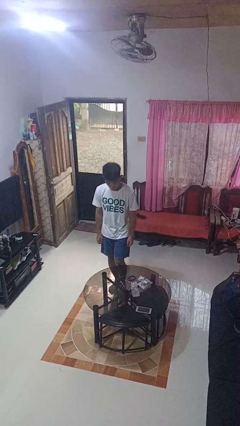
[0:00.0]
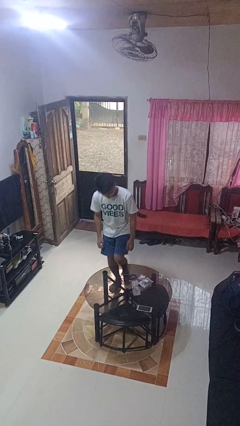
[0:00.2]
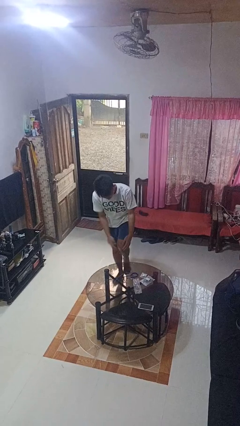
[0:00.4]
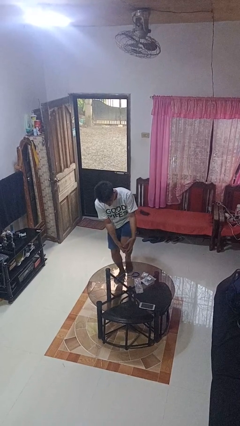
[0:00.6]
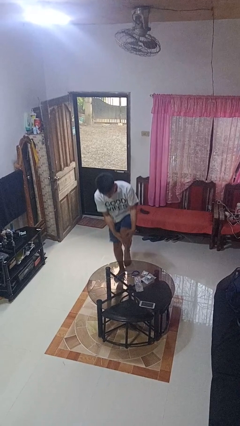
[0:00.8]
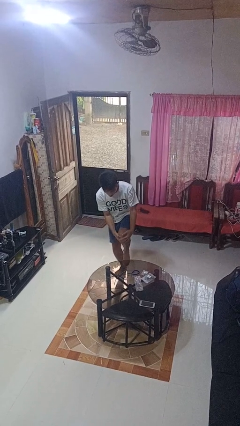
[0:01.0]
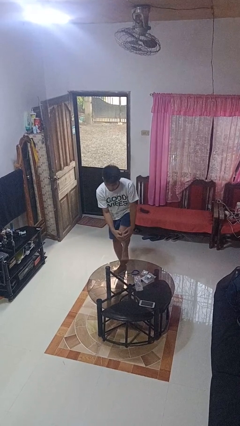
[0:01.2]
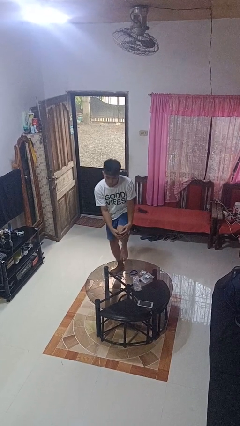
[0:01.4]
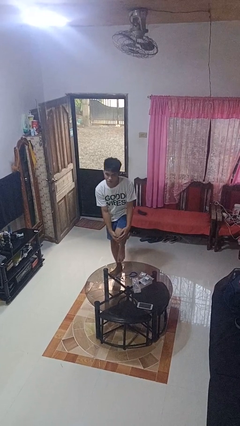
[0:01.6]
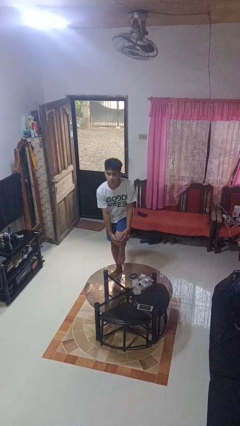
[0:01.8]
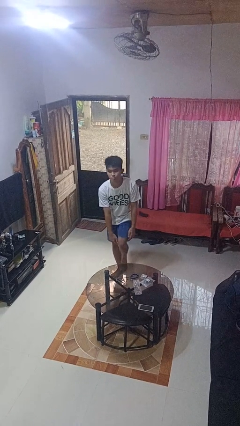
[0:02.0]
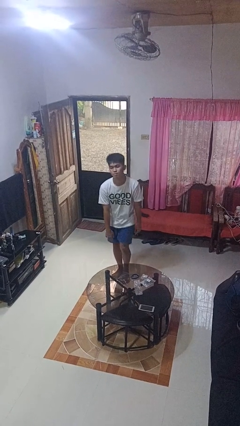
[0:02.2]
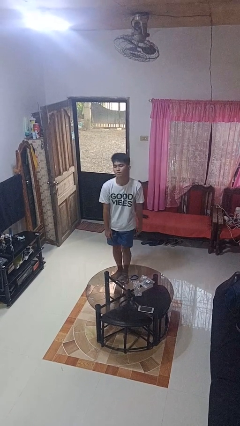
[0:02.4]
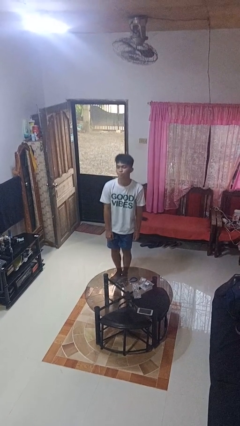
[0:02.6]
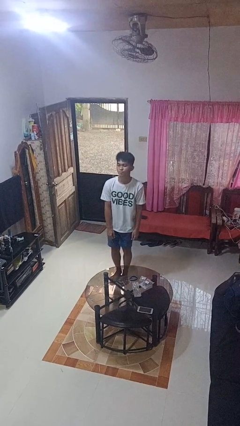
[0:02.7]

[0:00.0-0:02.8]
person bumps into table

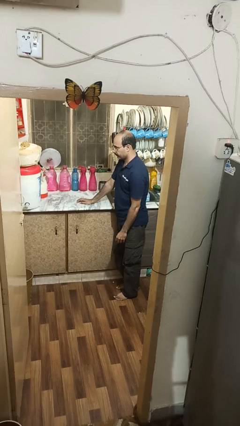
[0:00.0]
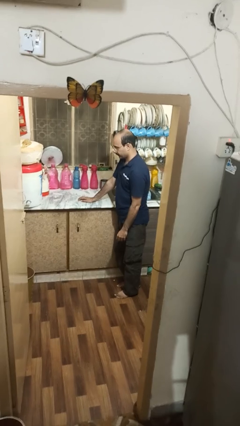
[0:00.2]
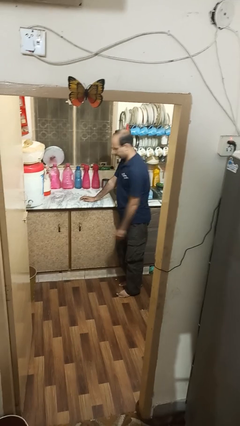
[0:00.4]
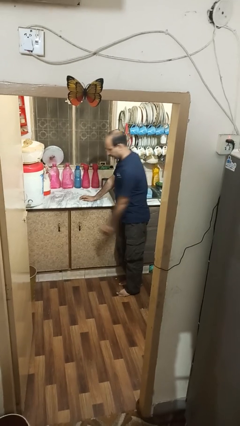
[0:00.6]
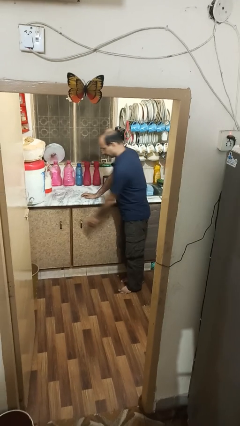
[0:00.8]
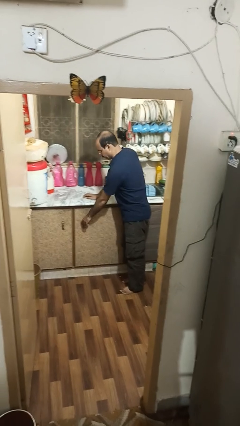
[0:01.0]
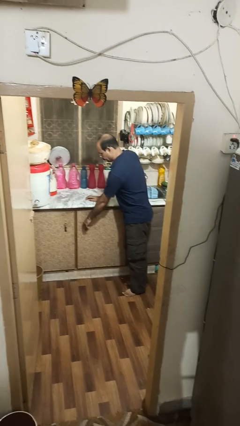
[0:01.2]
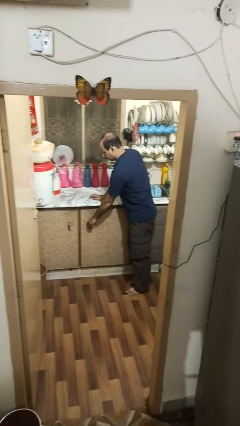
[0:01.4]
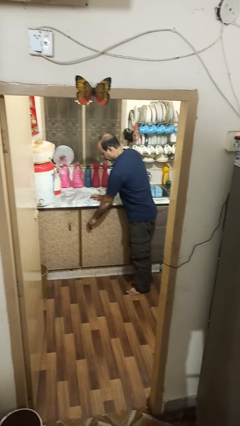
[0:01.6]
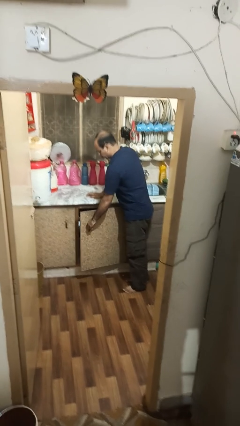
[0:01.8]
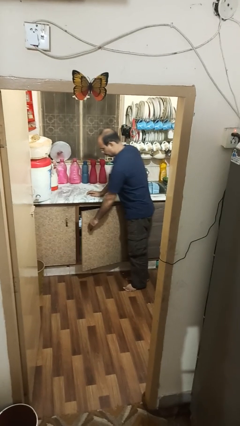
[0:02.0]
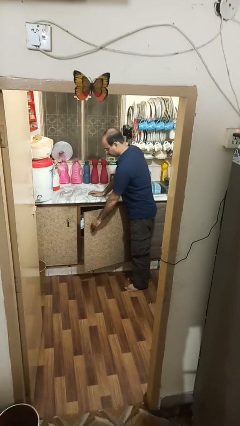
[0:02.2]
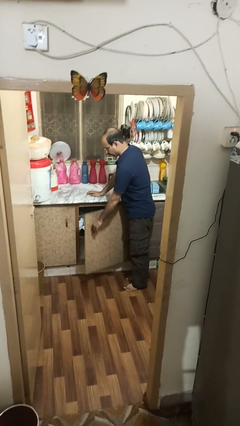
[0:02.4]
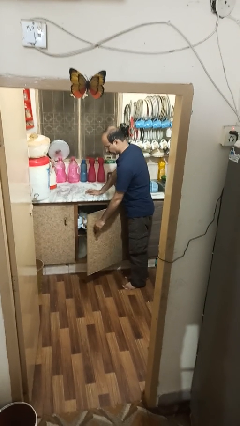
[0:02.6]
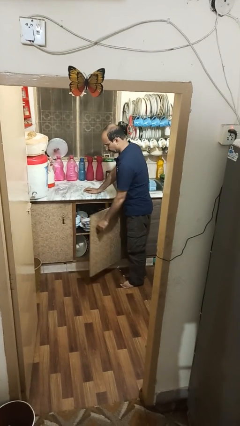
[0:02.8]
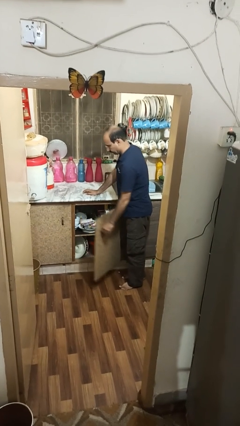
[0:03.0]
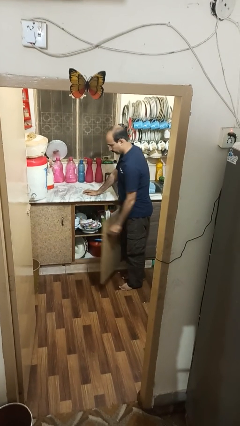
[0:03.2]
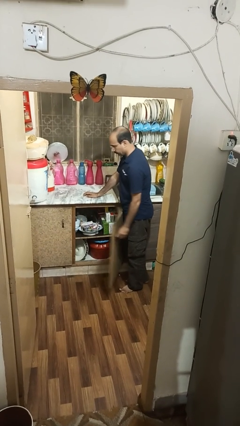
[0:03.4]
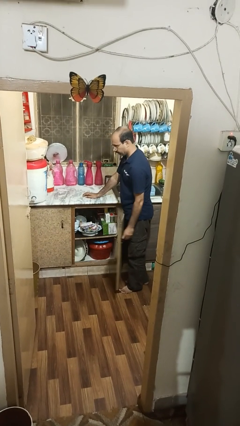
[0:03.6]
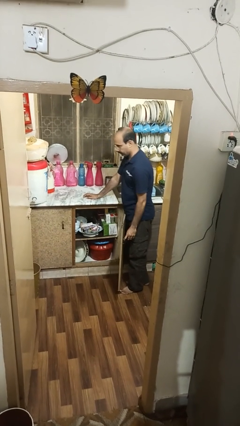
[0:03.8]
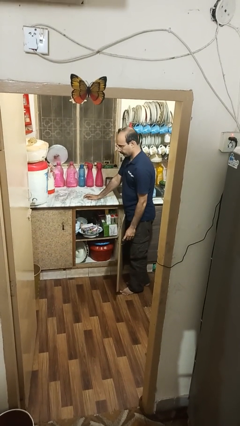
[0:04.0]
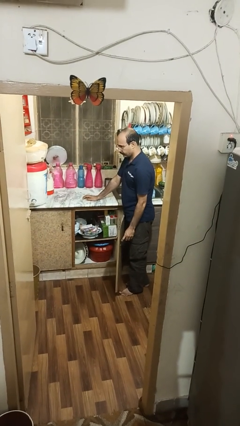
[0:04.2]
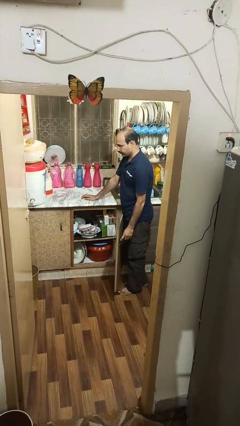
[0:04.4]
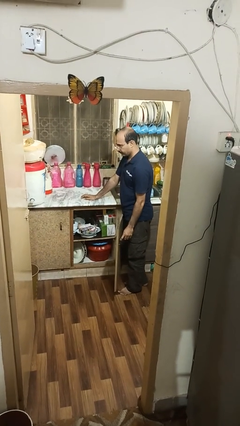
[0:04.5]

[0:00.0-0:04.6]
person opens cabinet

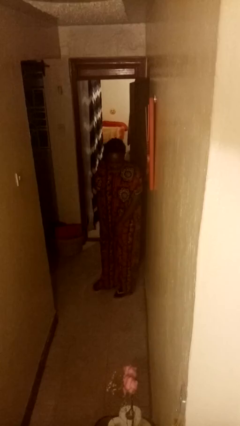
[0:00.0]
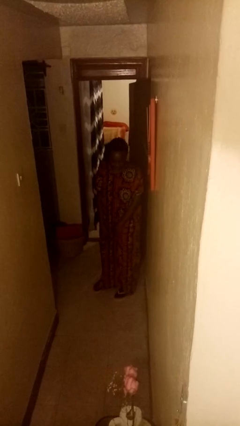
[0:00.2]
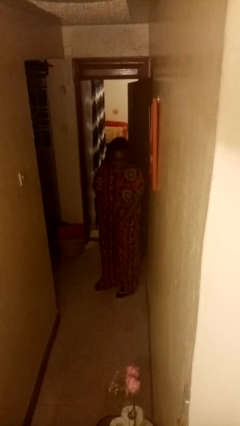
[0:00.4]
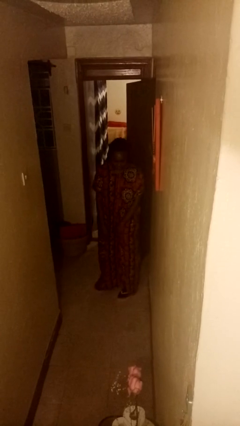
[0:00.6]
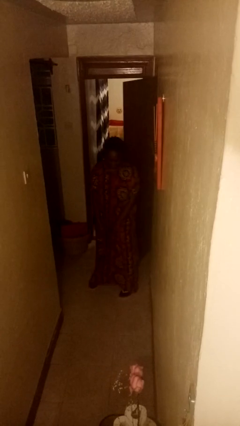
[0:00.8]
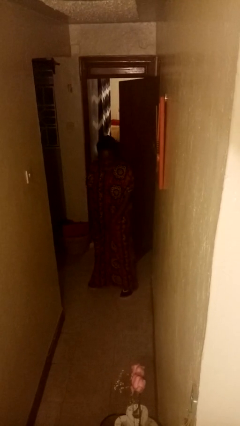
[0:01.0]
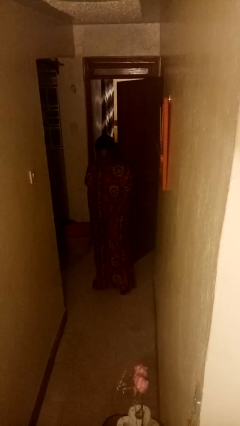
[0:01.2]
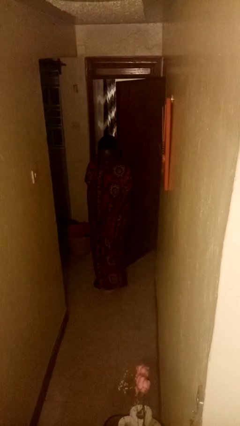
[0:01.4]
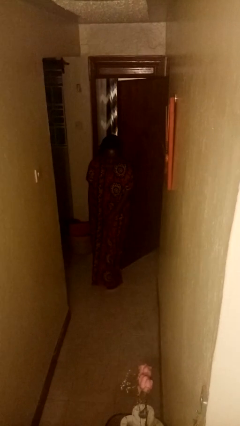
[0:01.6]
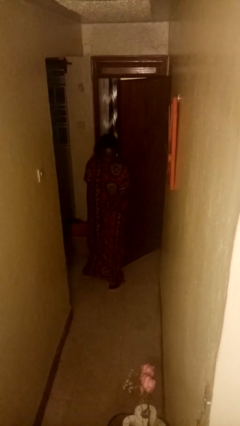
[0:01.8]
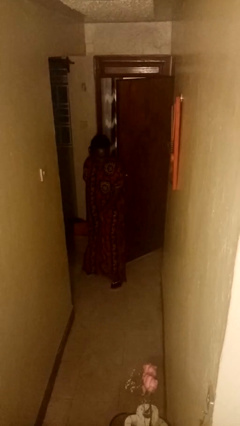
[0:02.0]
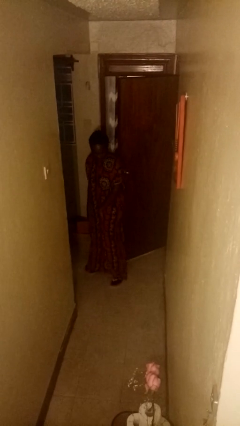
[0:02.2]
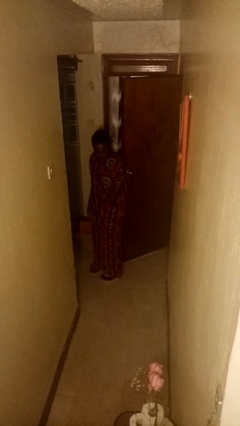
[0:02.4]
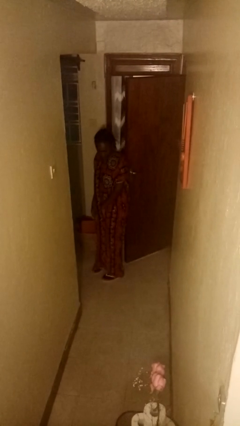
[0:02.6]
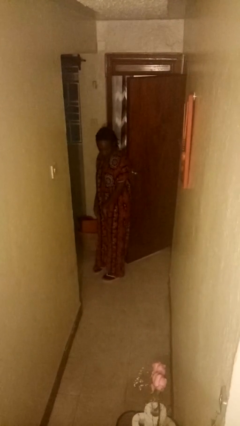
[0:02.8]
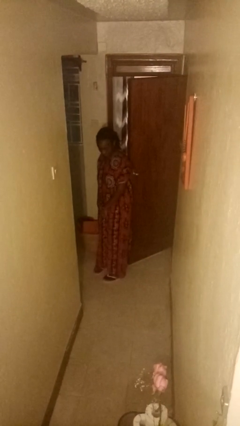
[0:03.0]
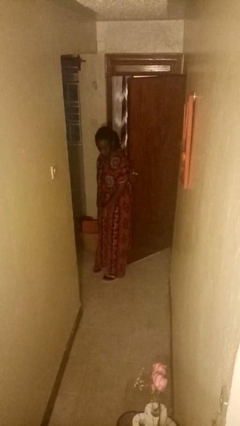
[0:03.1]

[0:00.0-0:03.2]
person opens facility door

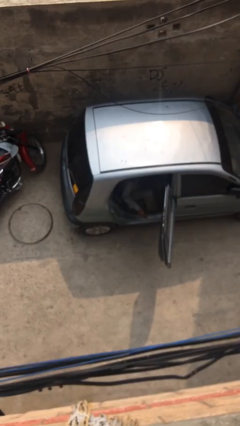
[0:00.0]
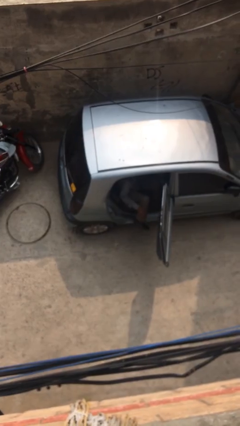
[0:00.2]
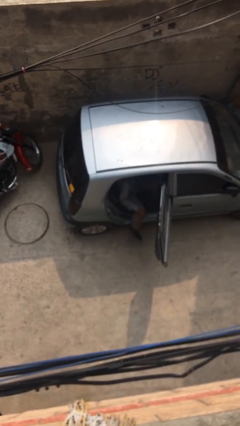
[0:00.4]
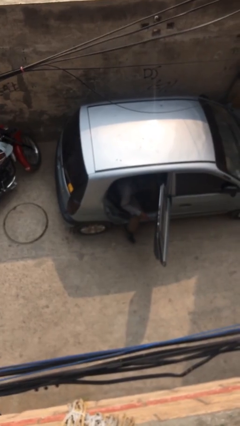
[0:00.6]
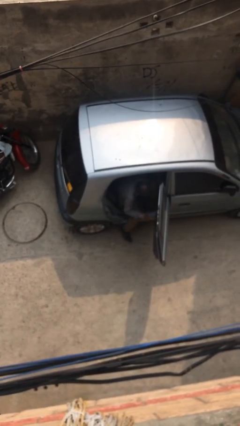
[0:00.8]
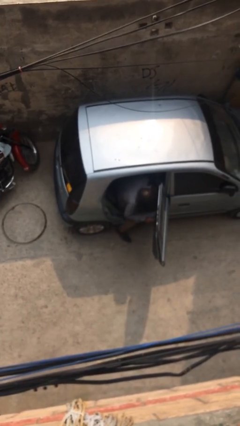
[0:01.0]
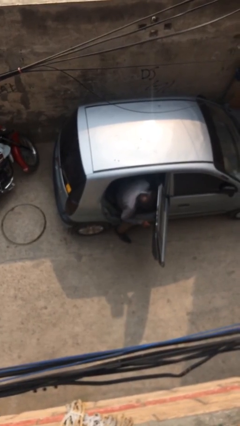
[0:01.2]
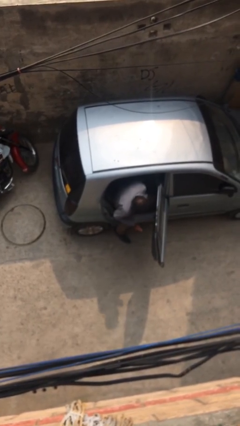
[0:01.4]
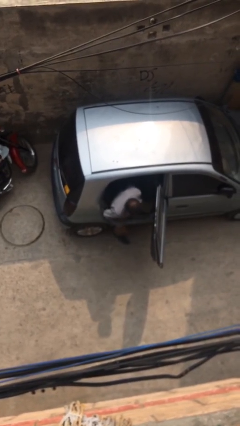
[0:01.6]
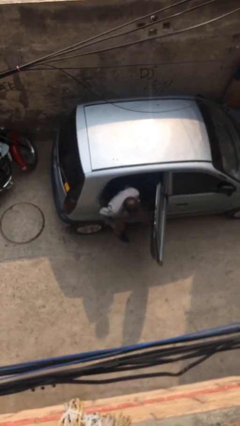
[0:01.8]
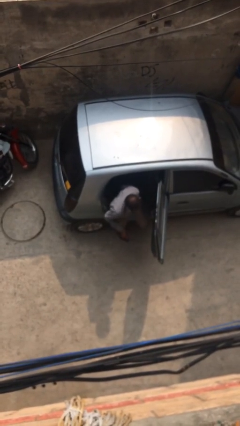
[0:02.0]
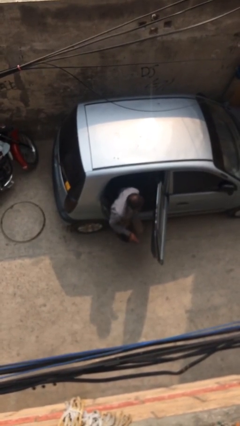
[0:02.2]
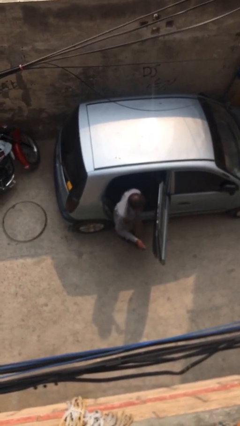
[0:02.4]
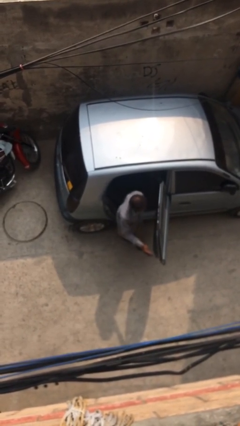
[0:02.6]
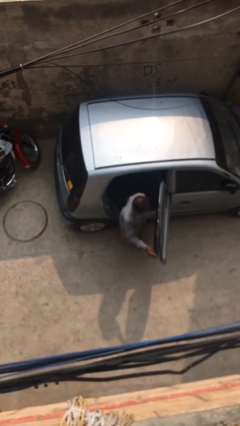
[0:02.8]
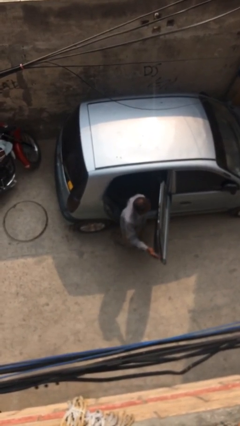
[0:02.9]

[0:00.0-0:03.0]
person exits car

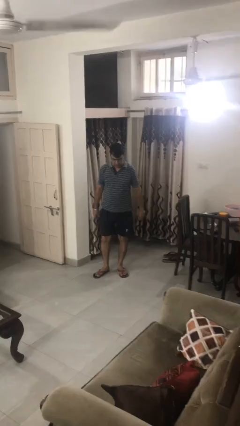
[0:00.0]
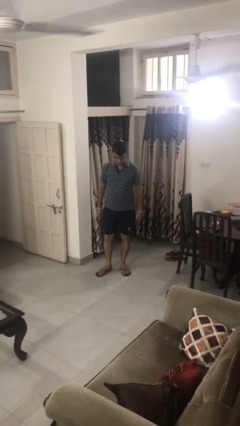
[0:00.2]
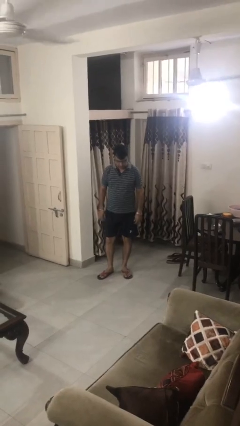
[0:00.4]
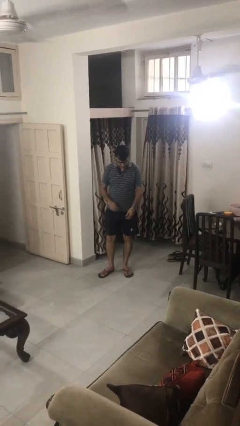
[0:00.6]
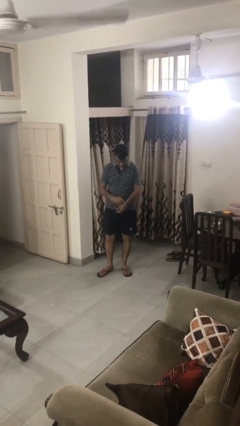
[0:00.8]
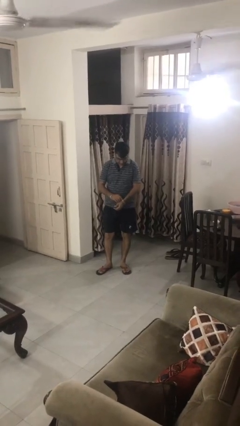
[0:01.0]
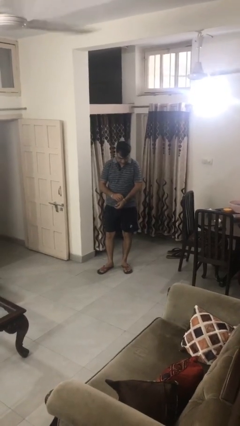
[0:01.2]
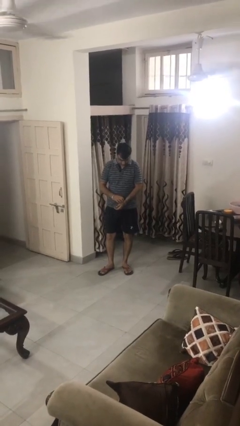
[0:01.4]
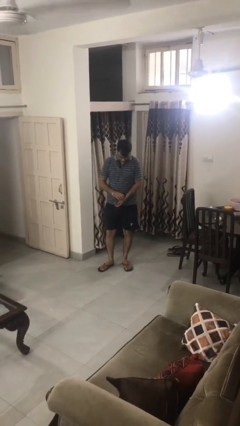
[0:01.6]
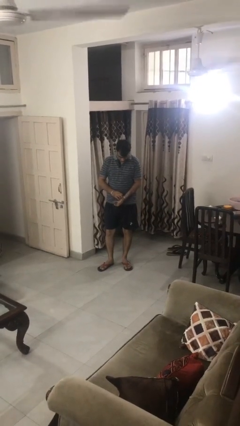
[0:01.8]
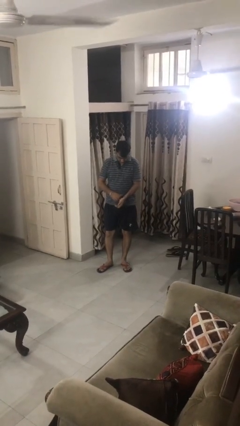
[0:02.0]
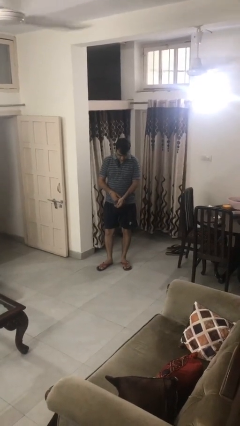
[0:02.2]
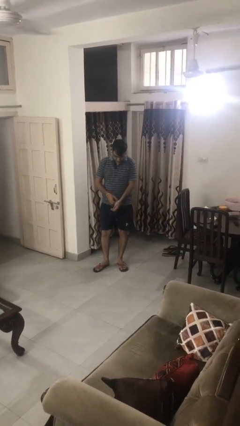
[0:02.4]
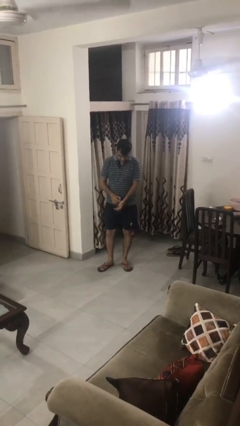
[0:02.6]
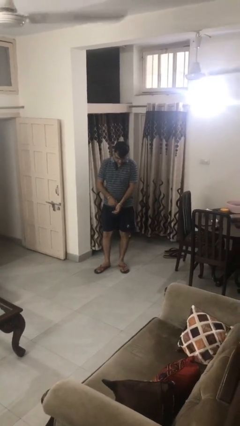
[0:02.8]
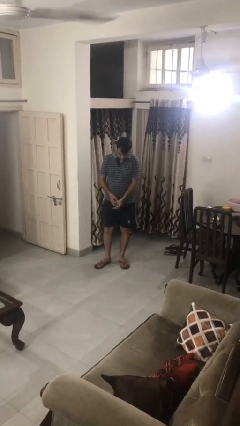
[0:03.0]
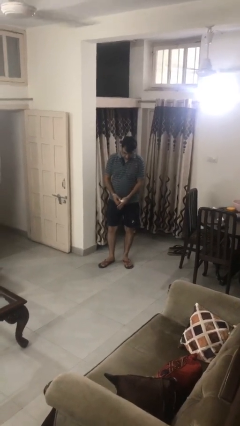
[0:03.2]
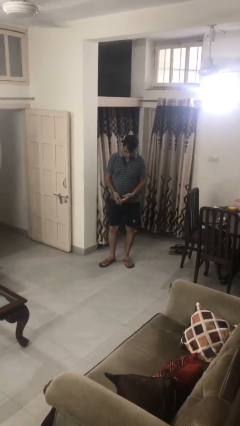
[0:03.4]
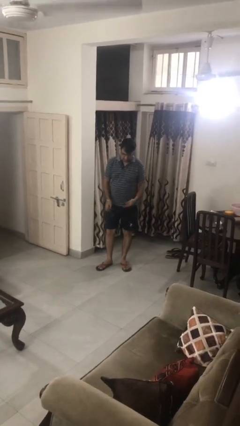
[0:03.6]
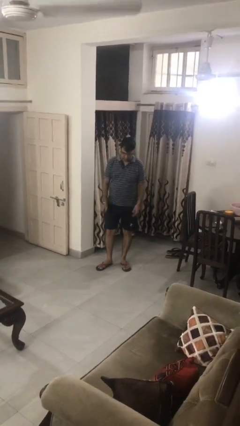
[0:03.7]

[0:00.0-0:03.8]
person takes off wristwatch
